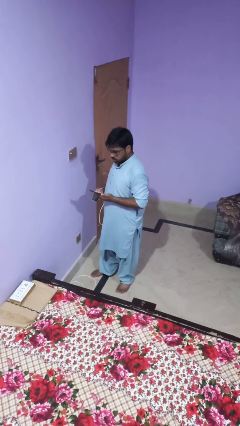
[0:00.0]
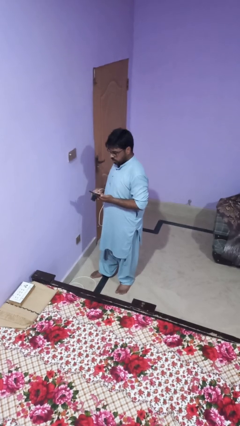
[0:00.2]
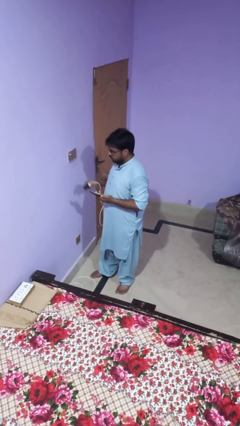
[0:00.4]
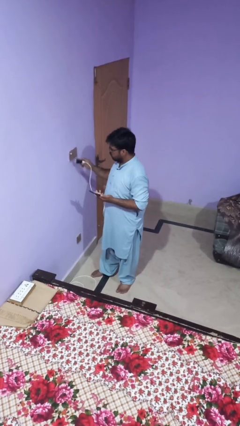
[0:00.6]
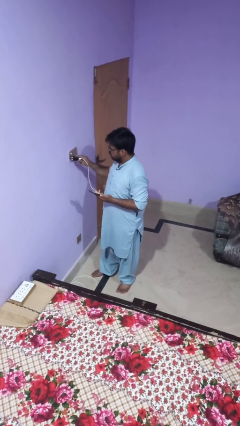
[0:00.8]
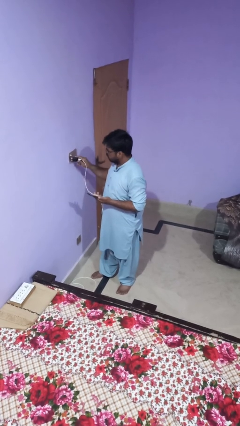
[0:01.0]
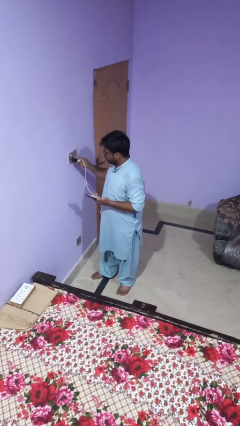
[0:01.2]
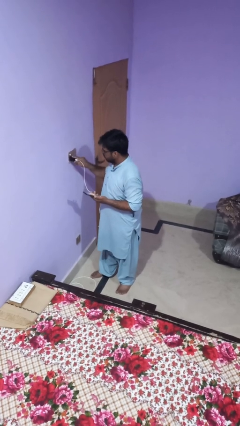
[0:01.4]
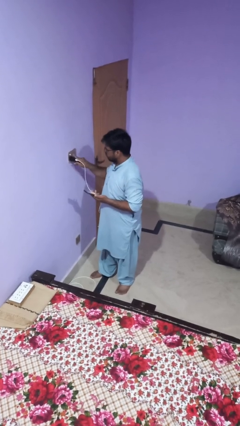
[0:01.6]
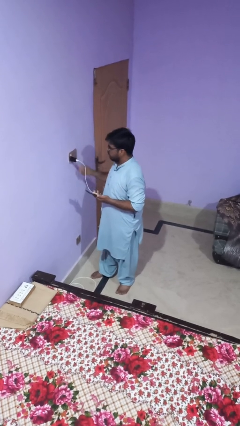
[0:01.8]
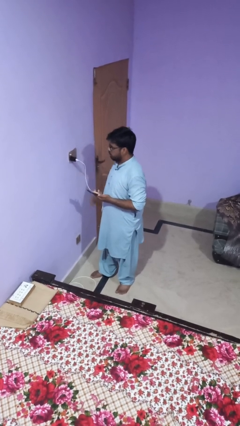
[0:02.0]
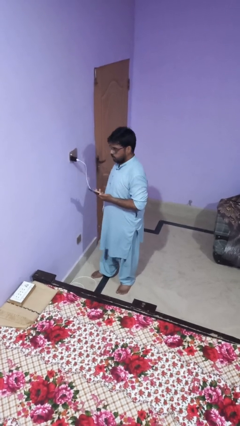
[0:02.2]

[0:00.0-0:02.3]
person plugs into electrical socket

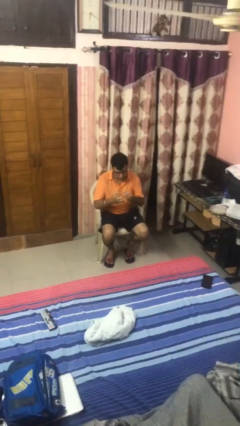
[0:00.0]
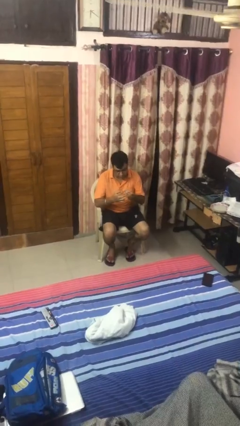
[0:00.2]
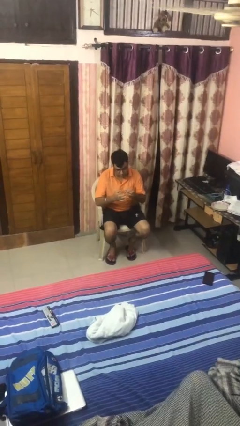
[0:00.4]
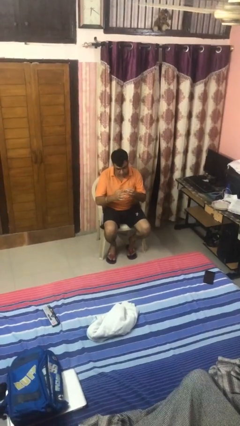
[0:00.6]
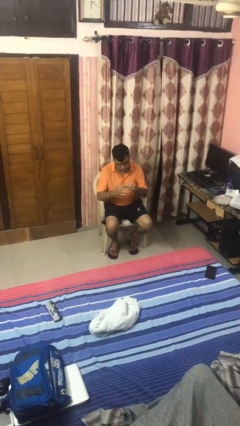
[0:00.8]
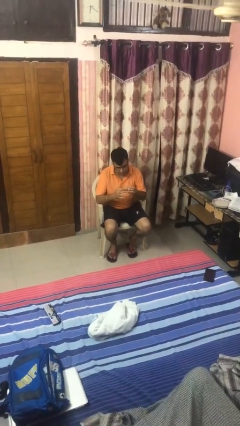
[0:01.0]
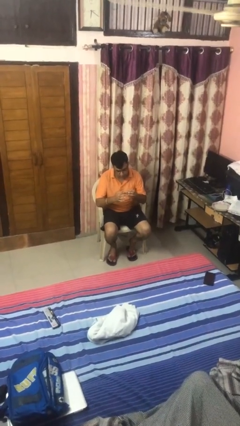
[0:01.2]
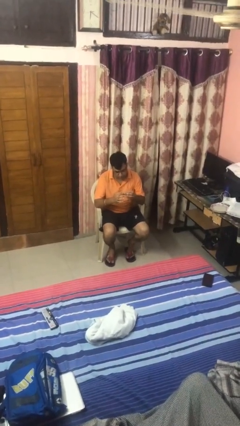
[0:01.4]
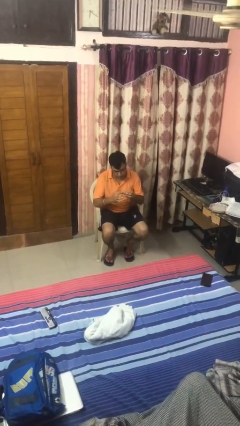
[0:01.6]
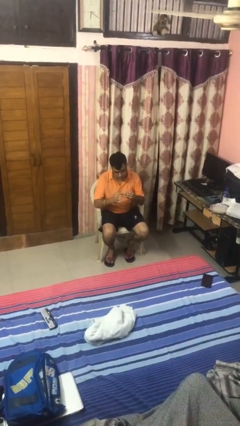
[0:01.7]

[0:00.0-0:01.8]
person clips fingernails

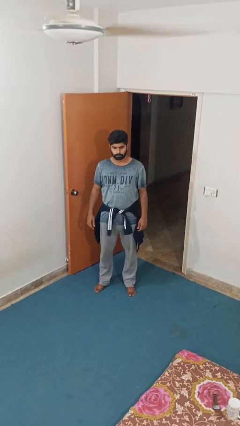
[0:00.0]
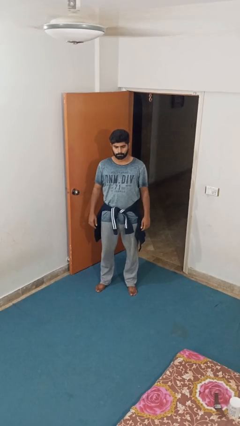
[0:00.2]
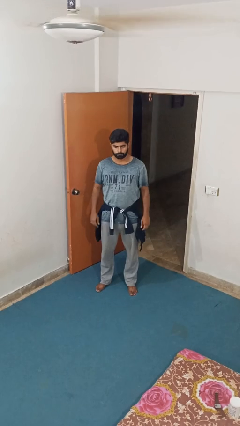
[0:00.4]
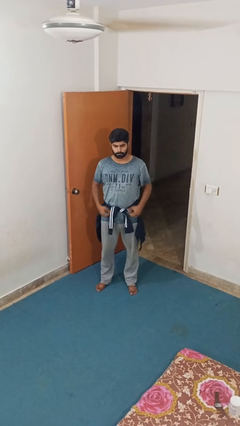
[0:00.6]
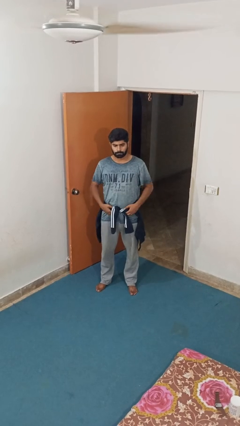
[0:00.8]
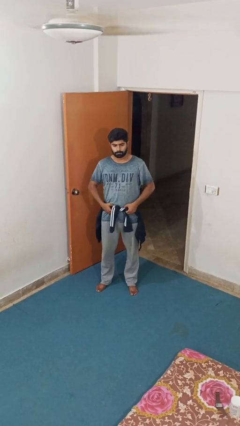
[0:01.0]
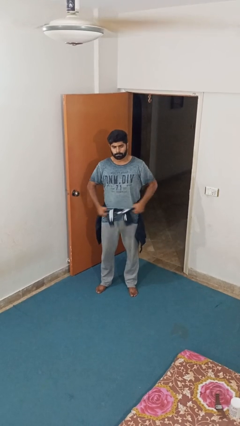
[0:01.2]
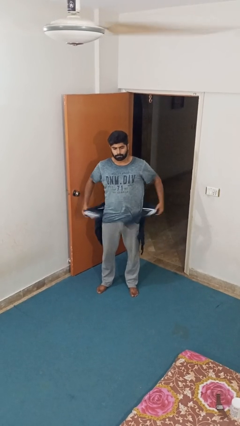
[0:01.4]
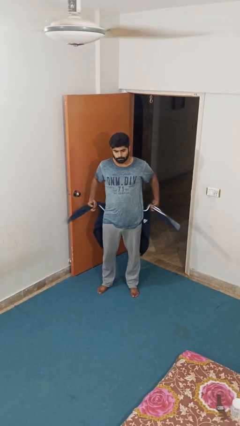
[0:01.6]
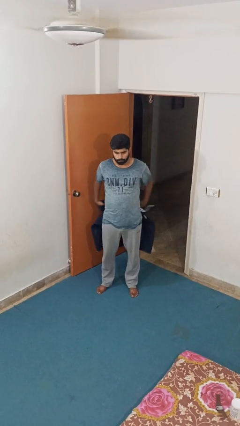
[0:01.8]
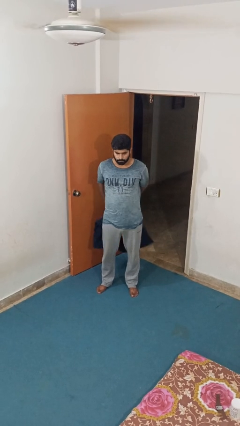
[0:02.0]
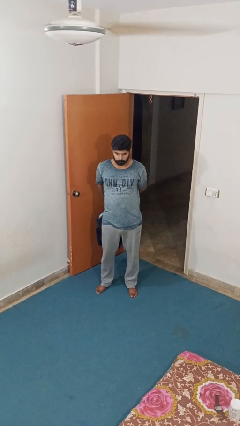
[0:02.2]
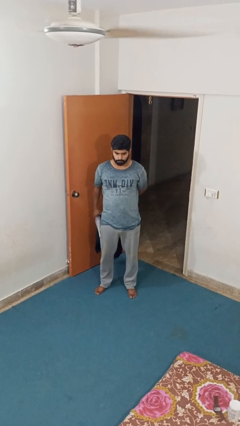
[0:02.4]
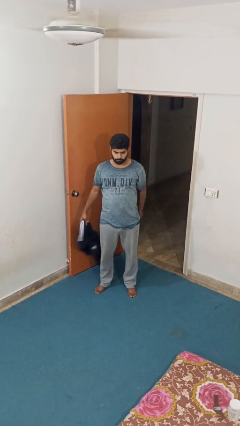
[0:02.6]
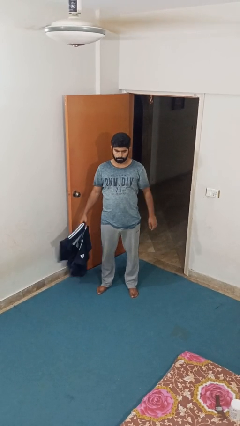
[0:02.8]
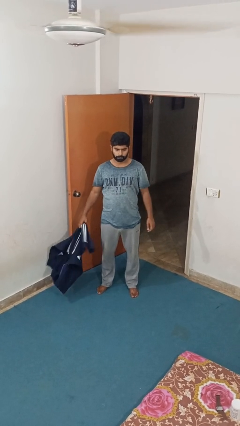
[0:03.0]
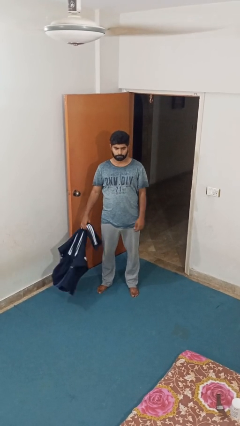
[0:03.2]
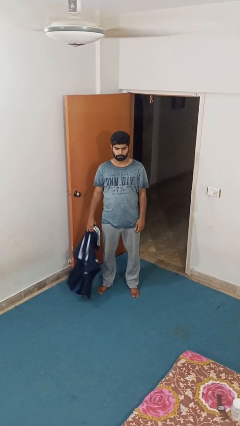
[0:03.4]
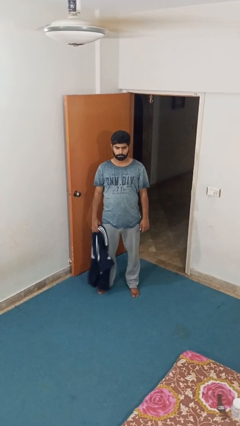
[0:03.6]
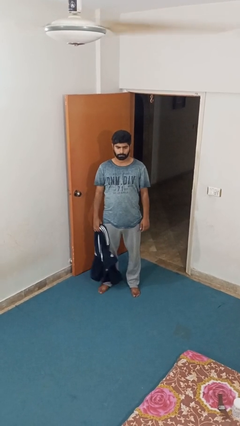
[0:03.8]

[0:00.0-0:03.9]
person unties jacket around waist

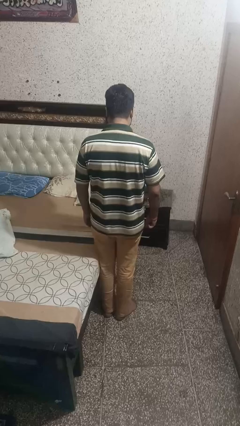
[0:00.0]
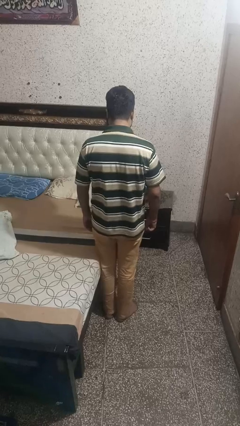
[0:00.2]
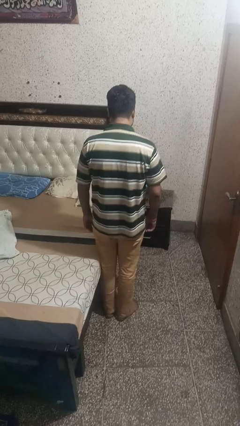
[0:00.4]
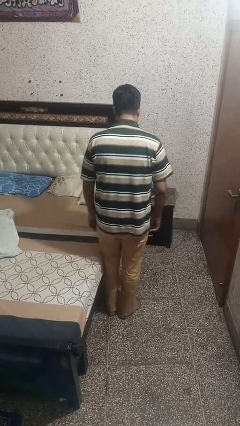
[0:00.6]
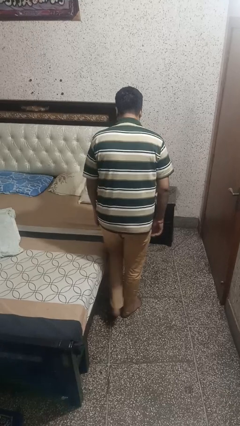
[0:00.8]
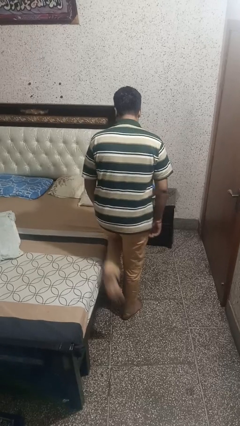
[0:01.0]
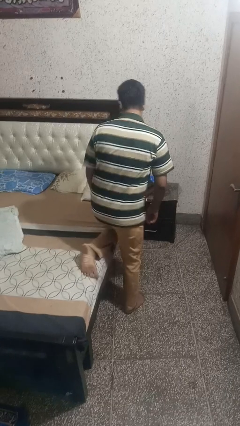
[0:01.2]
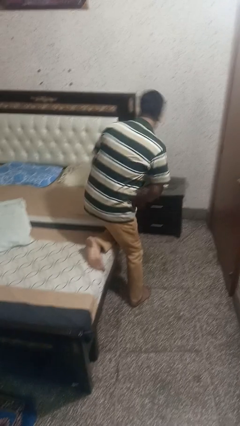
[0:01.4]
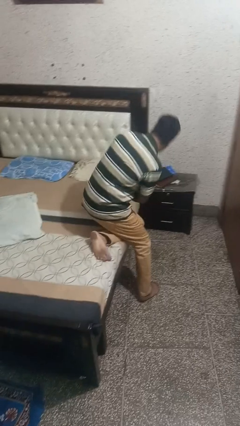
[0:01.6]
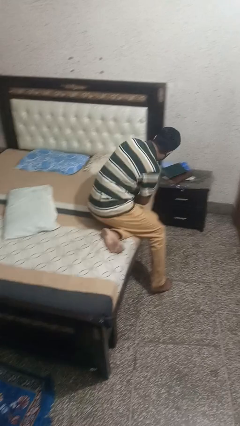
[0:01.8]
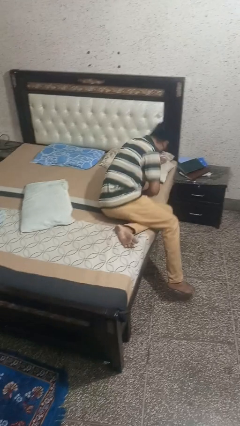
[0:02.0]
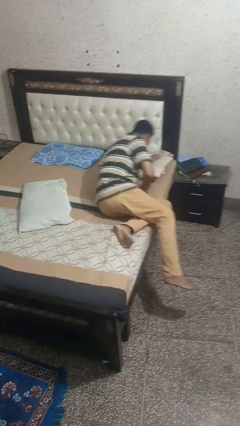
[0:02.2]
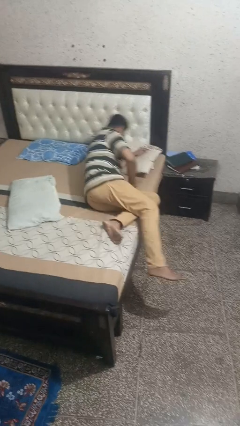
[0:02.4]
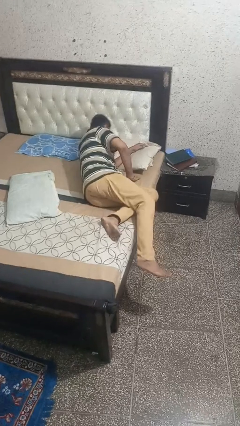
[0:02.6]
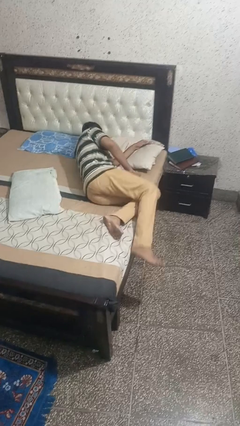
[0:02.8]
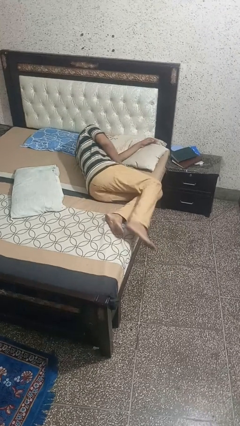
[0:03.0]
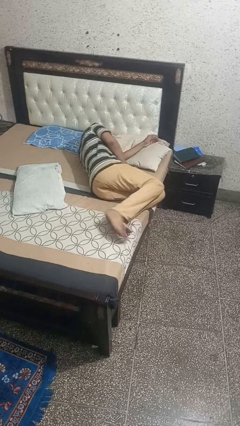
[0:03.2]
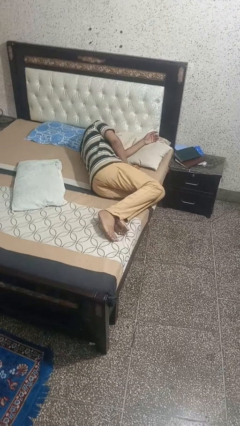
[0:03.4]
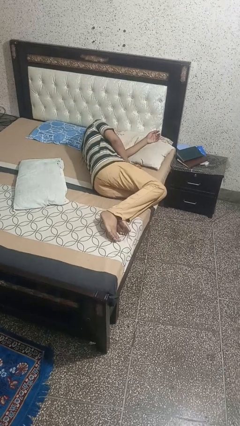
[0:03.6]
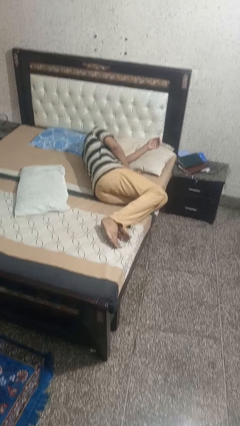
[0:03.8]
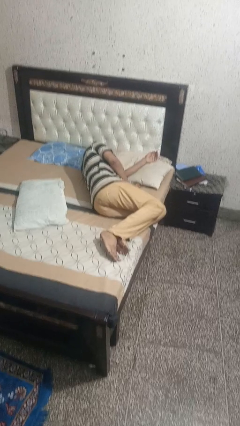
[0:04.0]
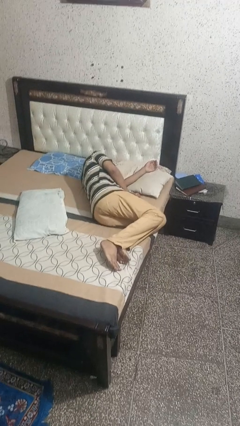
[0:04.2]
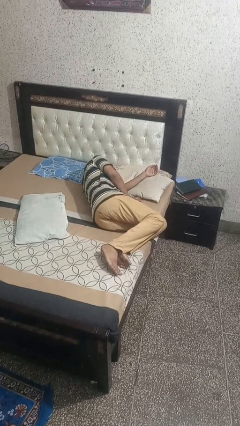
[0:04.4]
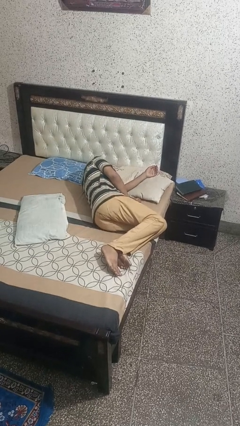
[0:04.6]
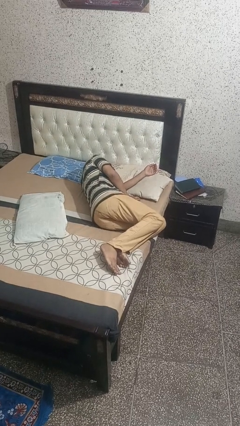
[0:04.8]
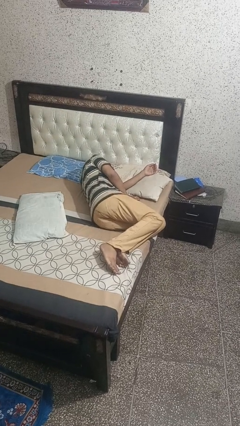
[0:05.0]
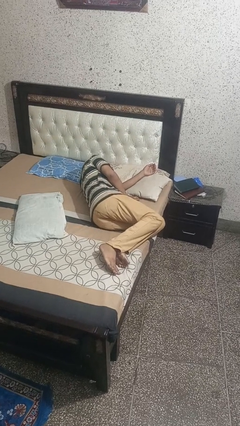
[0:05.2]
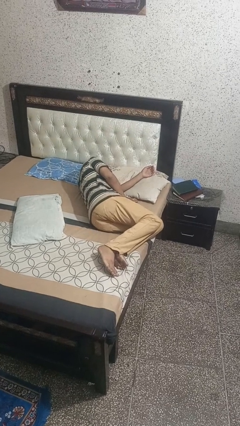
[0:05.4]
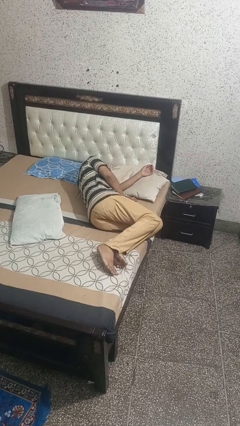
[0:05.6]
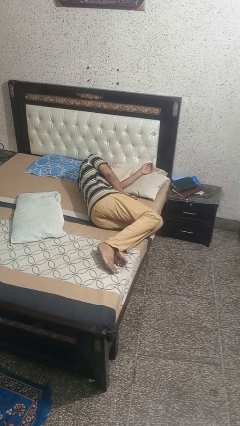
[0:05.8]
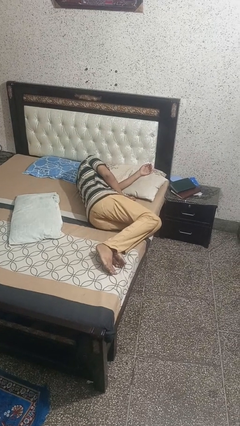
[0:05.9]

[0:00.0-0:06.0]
person lies down on bed

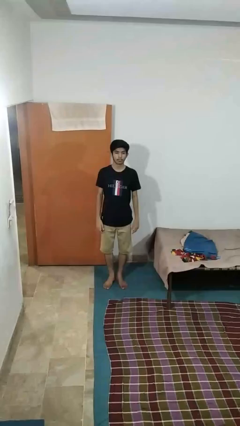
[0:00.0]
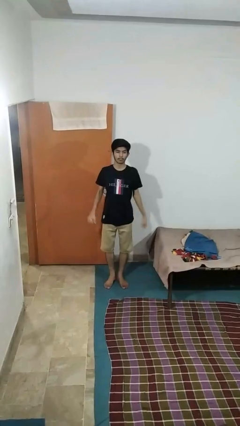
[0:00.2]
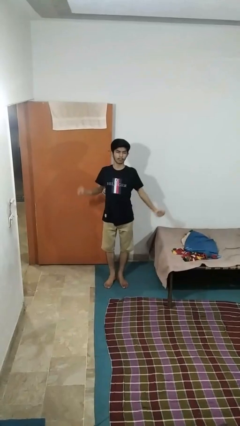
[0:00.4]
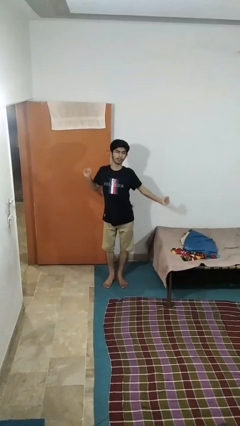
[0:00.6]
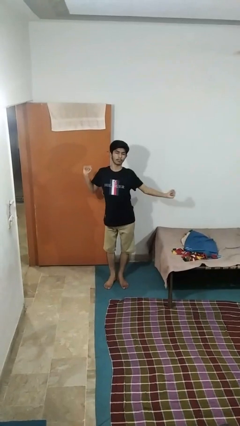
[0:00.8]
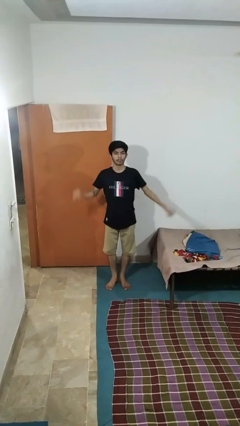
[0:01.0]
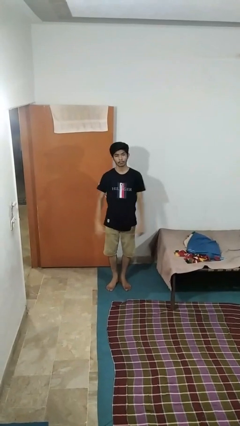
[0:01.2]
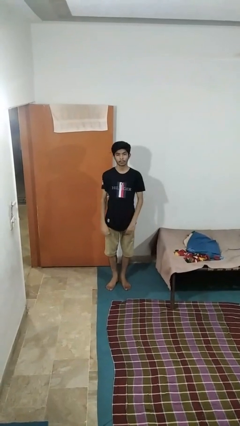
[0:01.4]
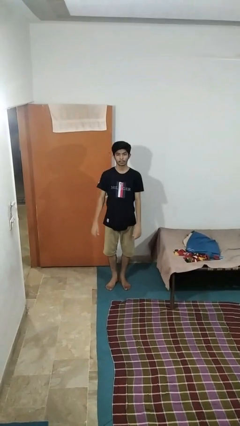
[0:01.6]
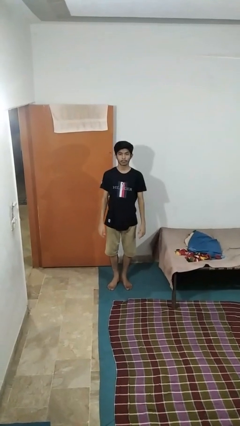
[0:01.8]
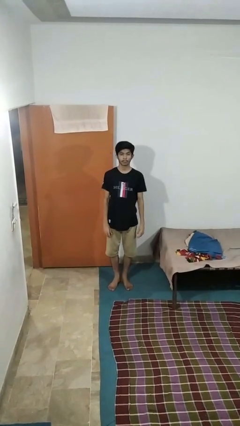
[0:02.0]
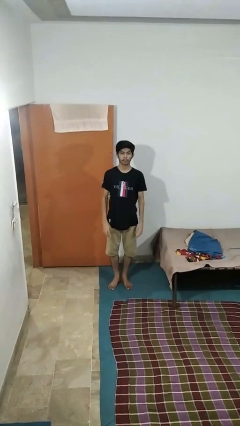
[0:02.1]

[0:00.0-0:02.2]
person stretches arms to side

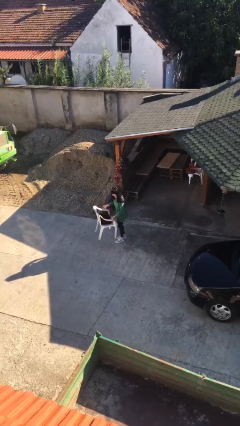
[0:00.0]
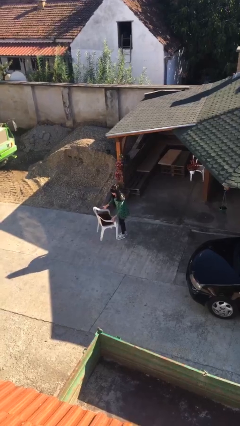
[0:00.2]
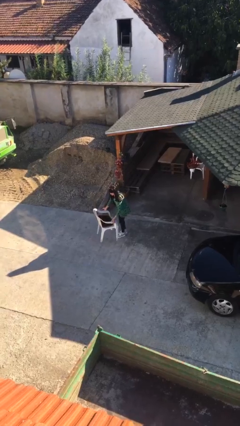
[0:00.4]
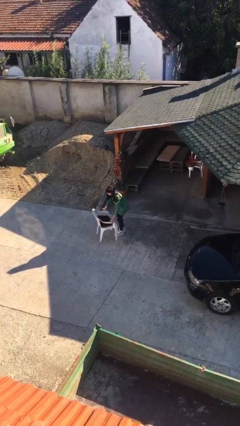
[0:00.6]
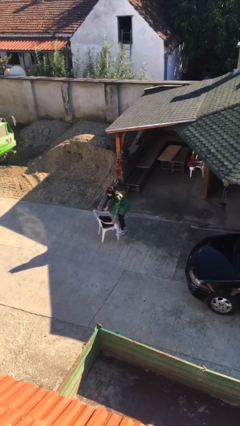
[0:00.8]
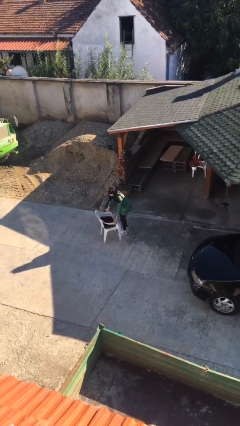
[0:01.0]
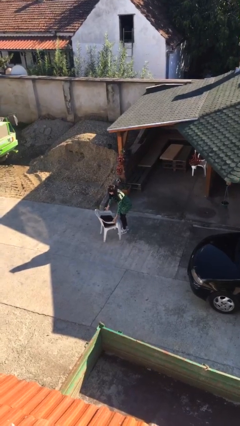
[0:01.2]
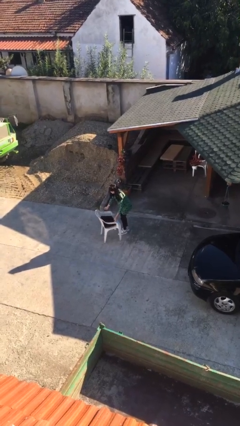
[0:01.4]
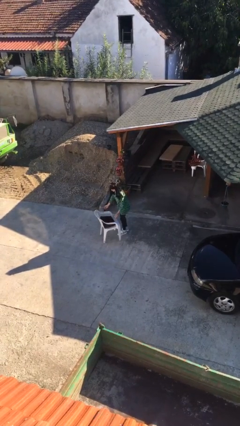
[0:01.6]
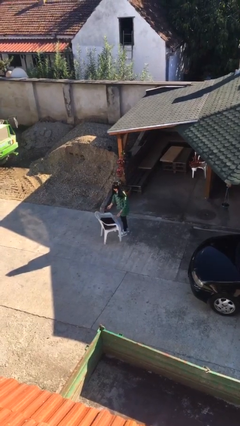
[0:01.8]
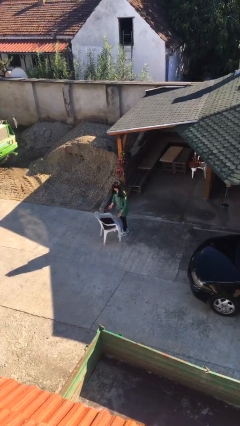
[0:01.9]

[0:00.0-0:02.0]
person puts down object on floor
